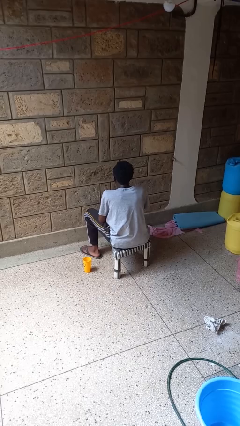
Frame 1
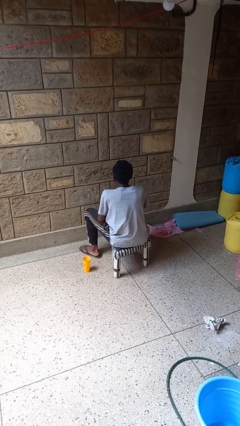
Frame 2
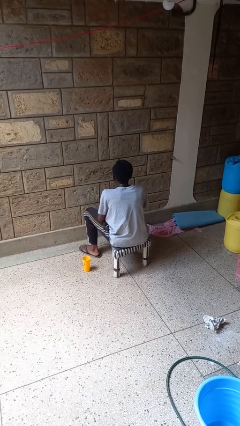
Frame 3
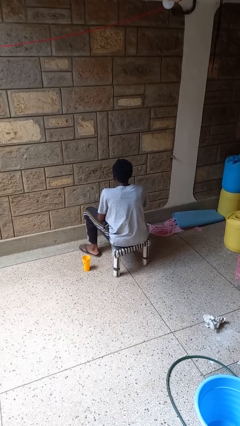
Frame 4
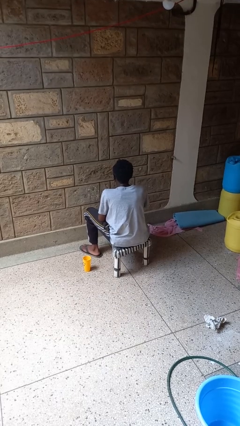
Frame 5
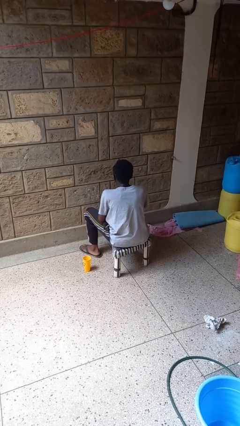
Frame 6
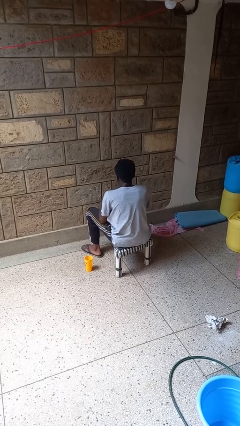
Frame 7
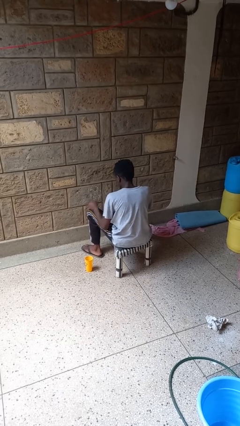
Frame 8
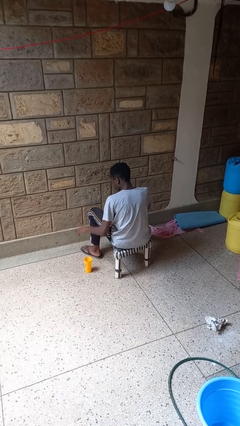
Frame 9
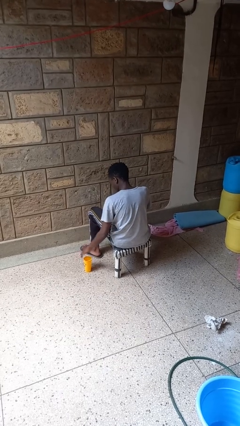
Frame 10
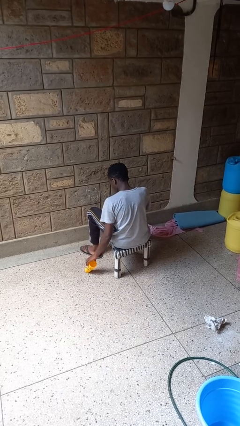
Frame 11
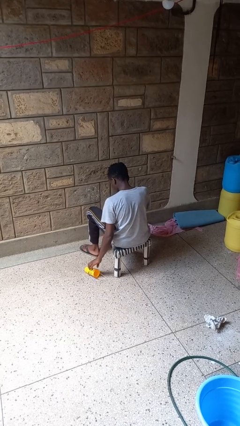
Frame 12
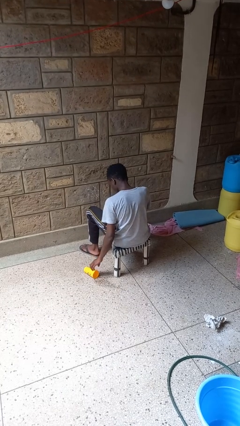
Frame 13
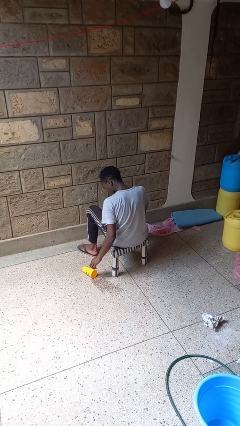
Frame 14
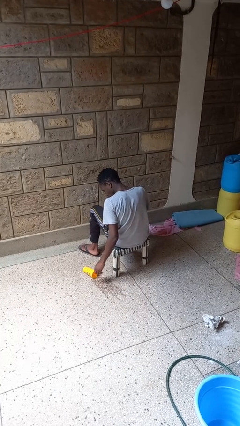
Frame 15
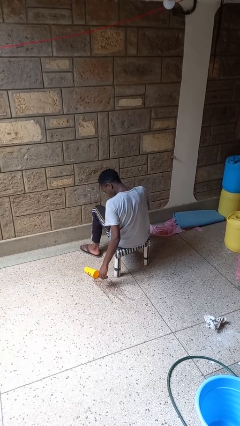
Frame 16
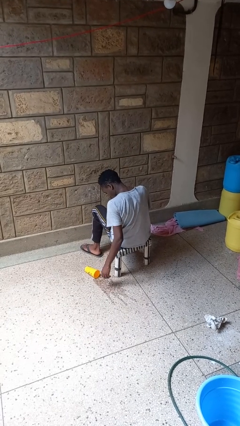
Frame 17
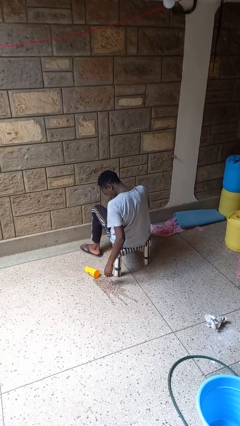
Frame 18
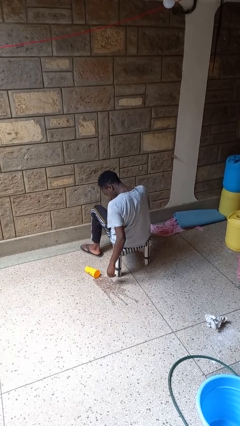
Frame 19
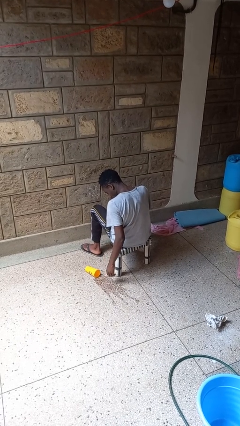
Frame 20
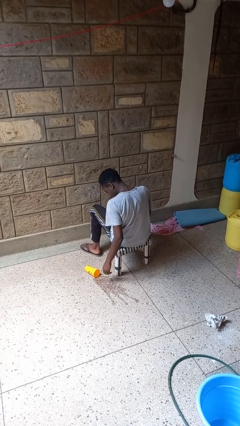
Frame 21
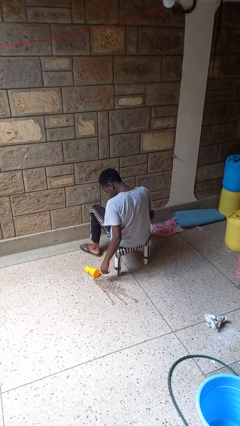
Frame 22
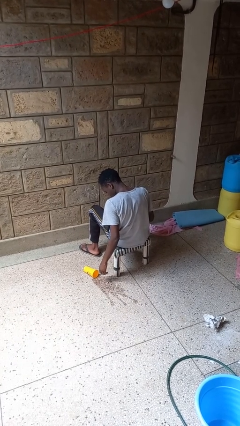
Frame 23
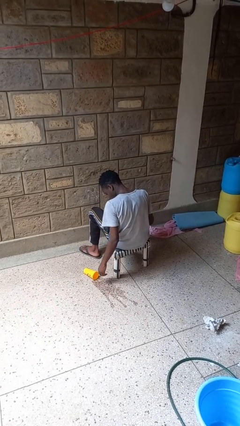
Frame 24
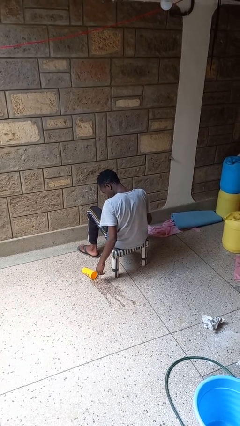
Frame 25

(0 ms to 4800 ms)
person spills on floor

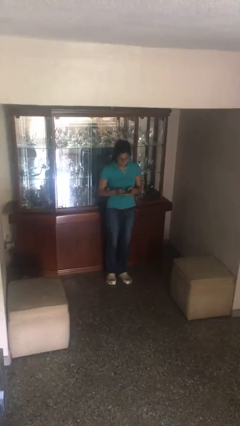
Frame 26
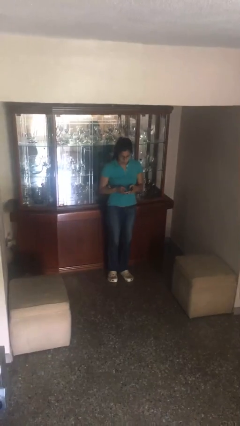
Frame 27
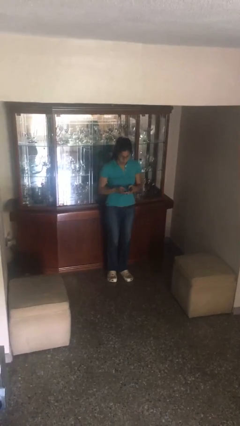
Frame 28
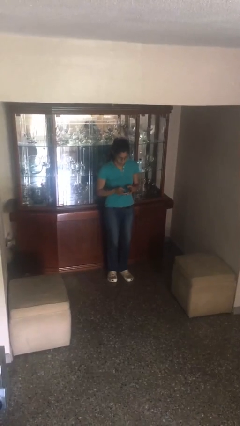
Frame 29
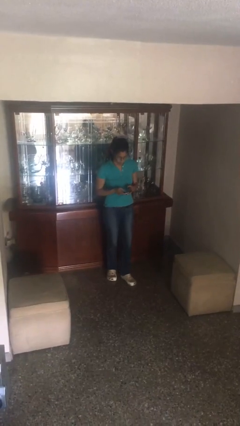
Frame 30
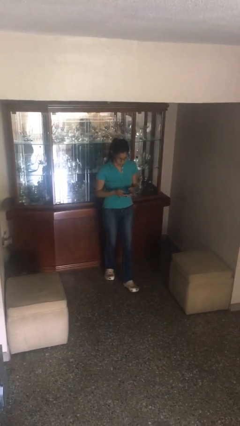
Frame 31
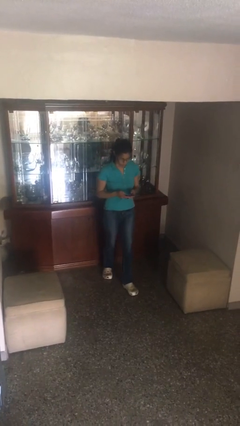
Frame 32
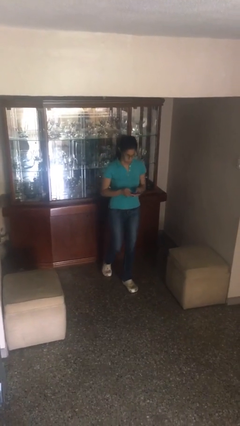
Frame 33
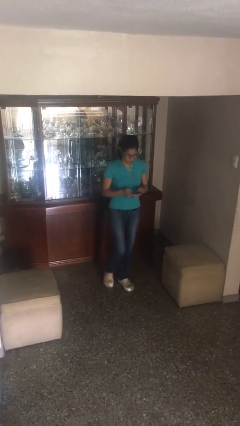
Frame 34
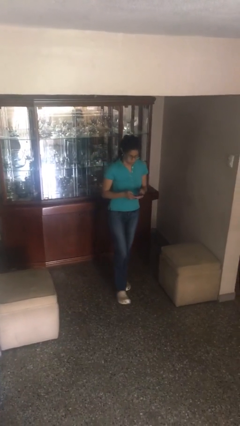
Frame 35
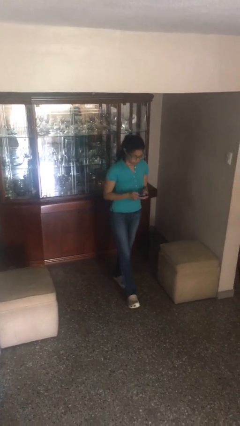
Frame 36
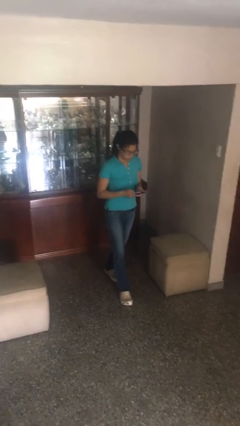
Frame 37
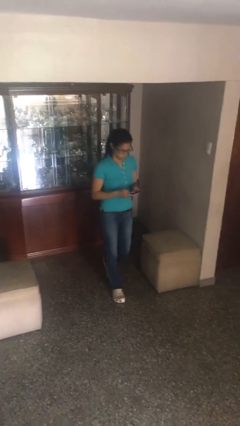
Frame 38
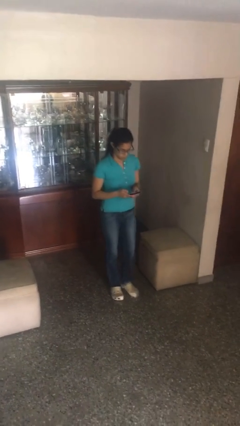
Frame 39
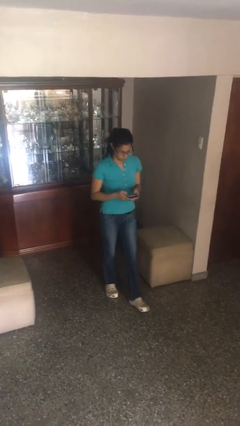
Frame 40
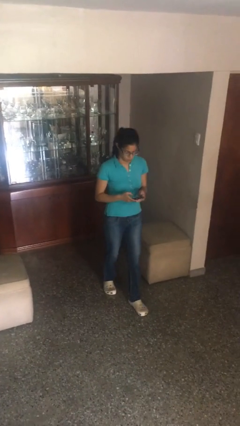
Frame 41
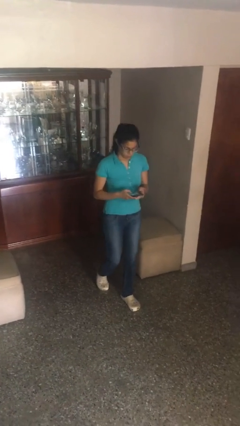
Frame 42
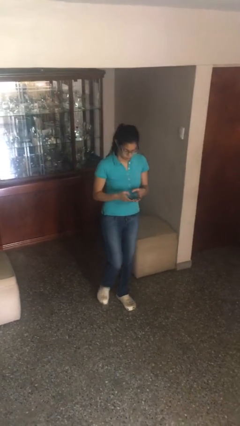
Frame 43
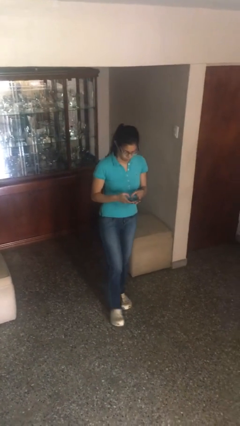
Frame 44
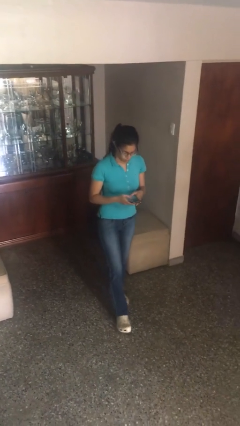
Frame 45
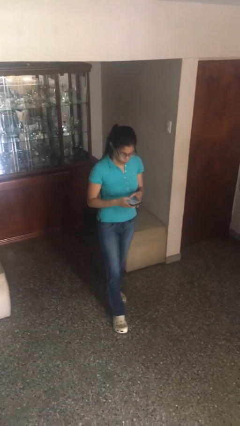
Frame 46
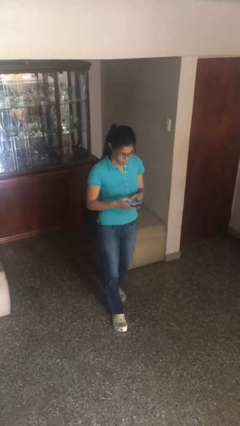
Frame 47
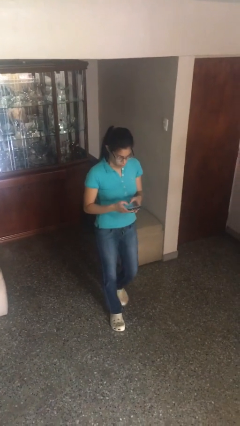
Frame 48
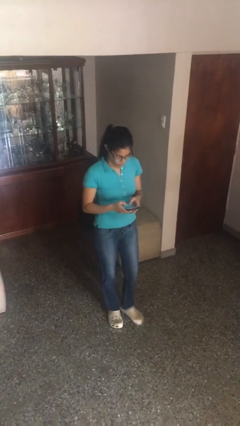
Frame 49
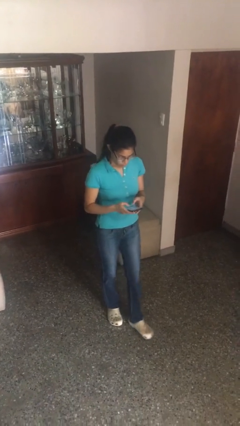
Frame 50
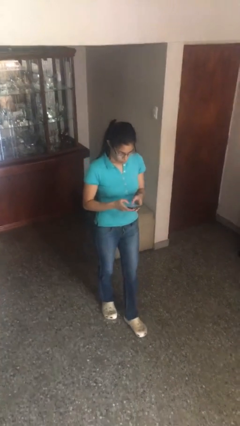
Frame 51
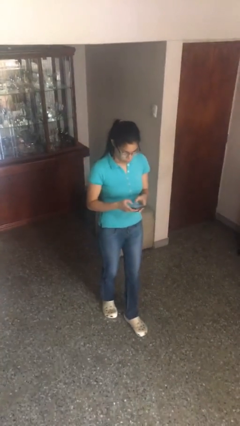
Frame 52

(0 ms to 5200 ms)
person texts on phone

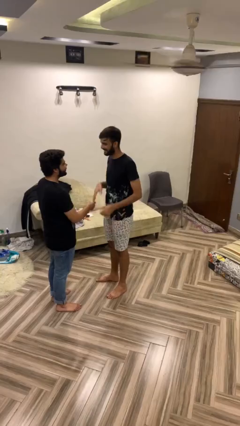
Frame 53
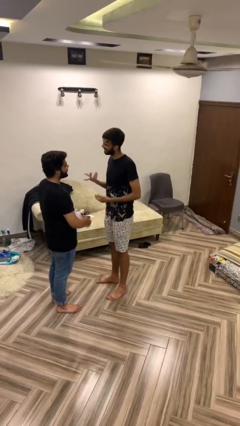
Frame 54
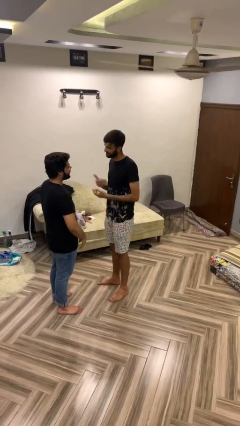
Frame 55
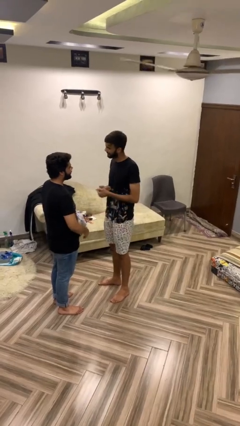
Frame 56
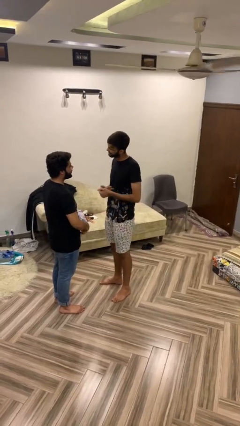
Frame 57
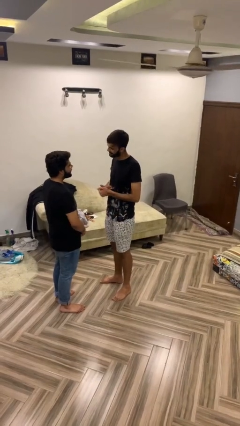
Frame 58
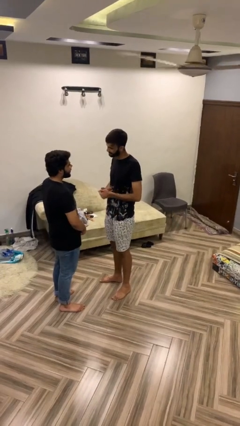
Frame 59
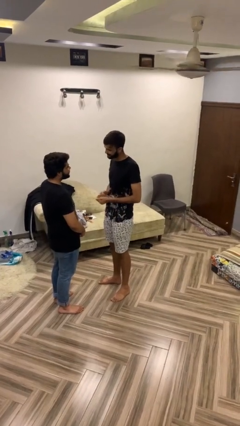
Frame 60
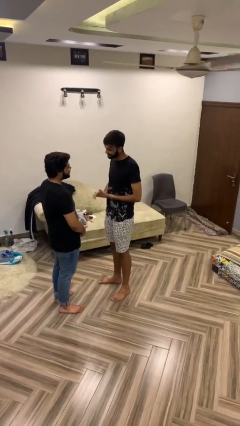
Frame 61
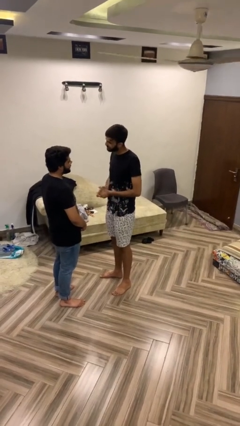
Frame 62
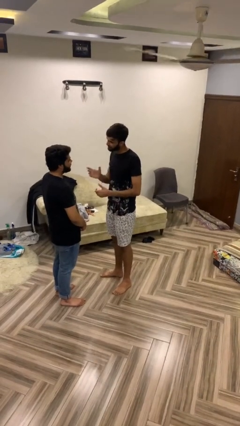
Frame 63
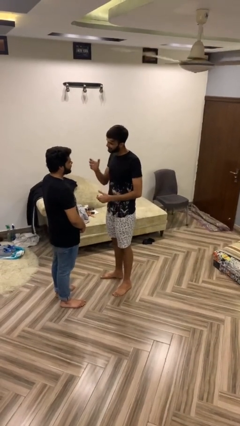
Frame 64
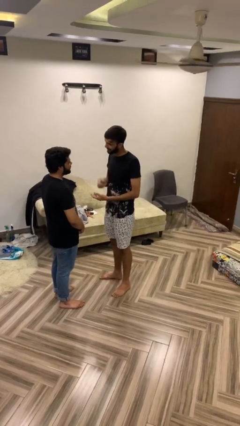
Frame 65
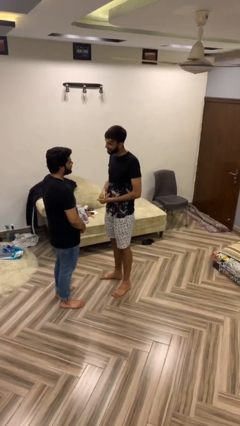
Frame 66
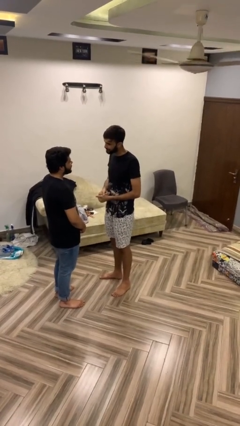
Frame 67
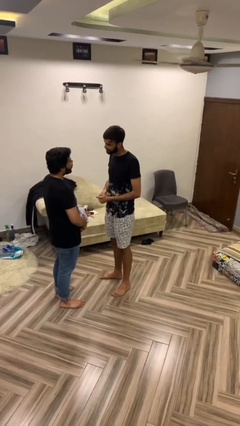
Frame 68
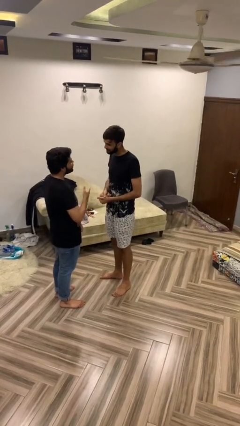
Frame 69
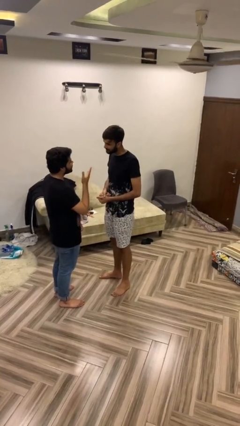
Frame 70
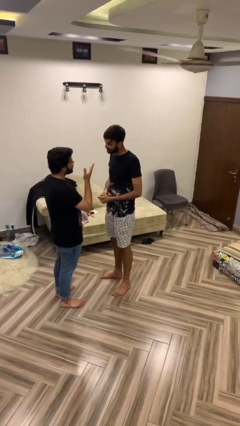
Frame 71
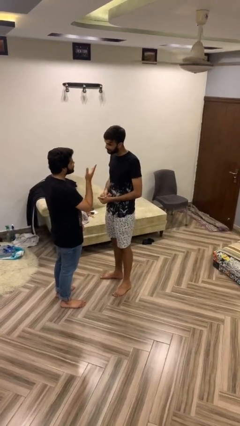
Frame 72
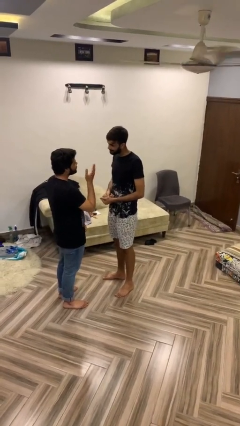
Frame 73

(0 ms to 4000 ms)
person talks to person

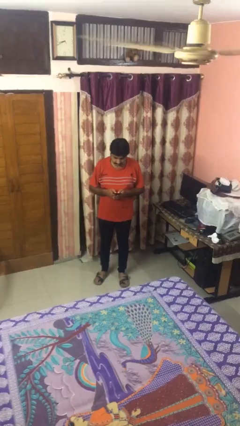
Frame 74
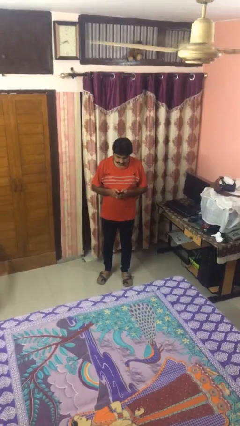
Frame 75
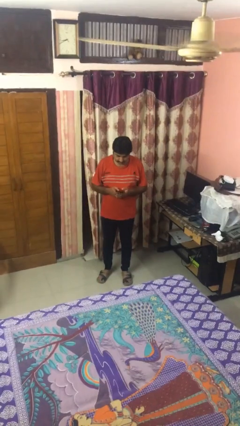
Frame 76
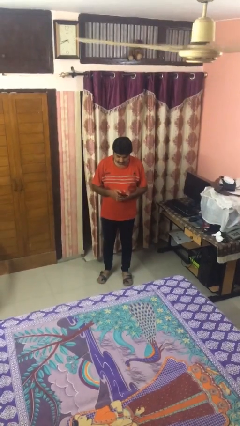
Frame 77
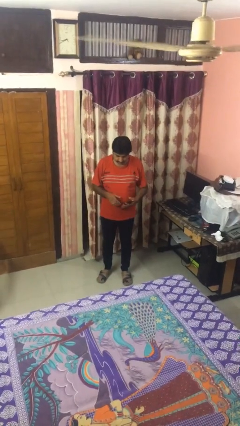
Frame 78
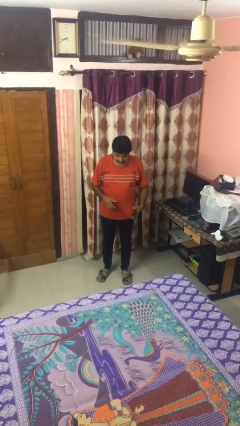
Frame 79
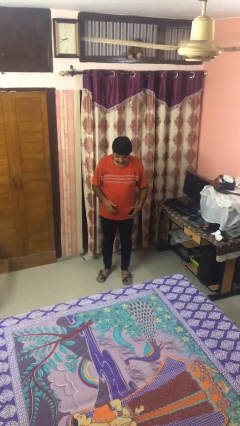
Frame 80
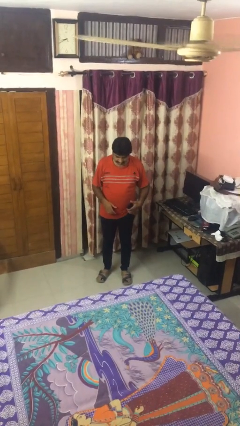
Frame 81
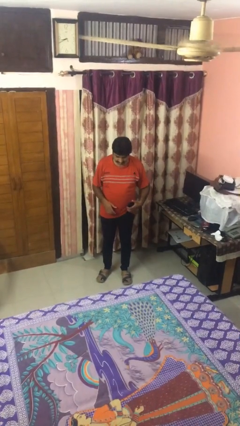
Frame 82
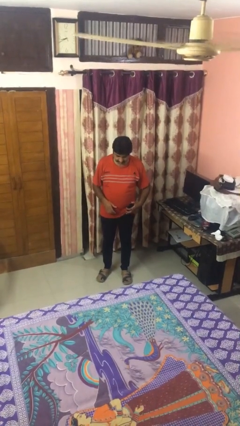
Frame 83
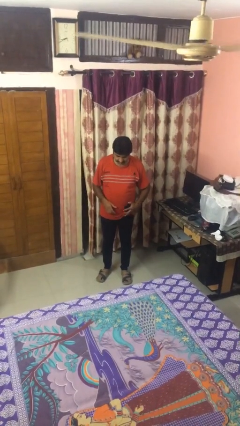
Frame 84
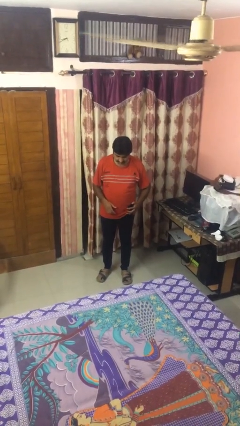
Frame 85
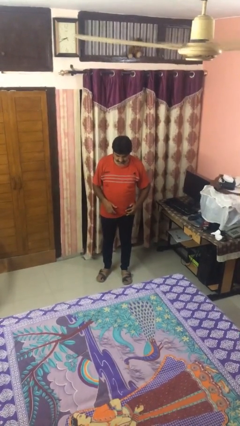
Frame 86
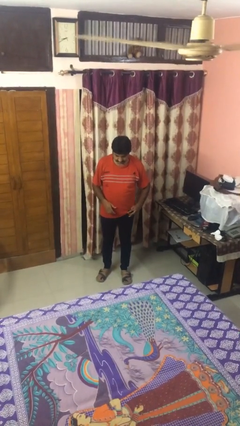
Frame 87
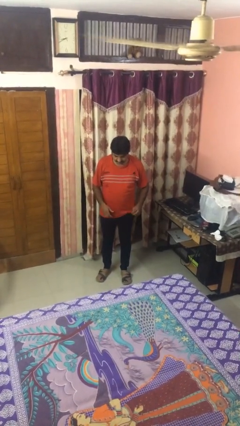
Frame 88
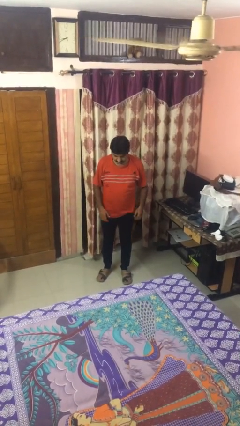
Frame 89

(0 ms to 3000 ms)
person puts phone into pocket

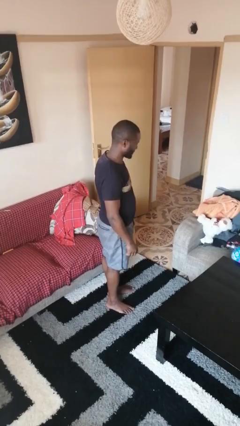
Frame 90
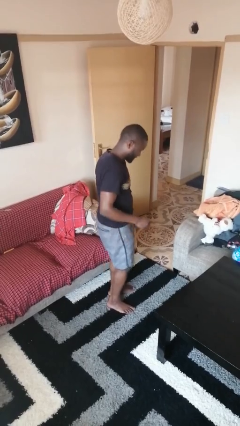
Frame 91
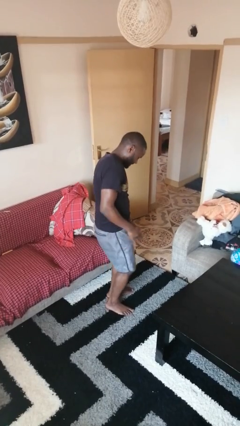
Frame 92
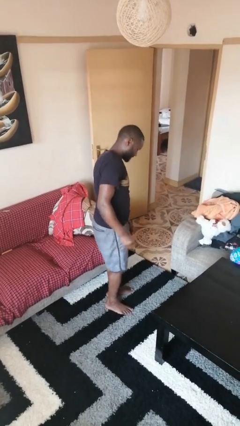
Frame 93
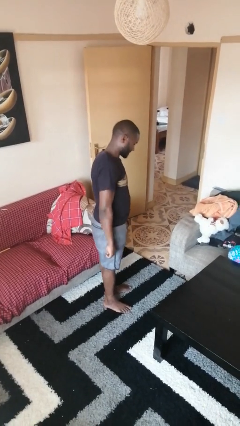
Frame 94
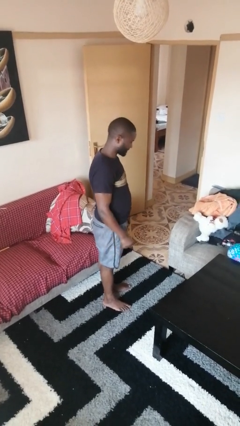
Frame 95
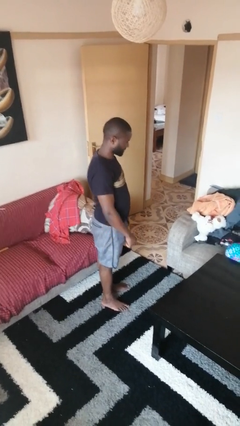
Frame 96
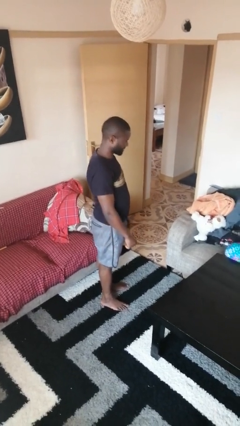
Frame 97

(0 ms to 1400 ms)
person swats bug
